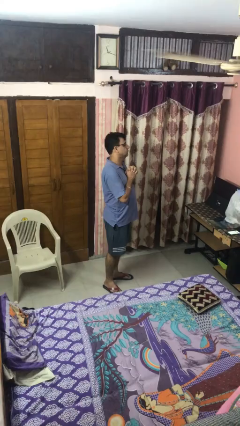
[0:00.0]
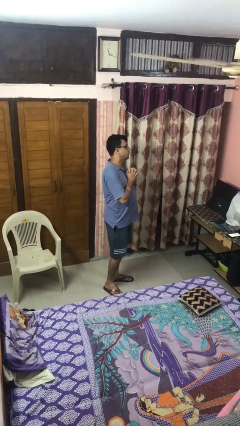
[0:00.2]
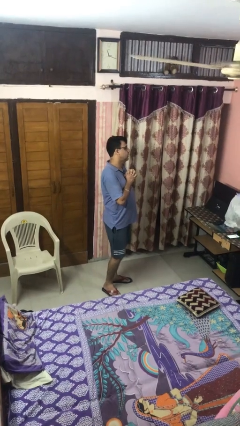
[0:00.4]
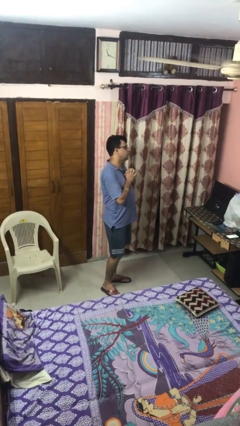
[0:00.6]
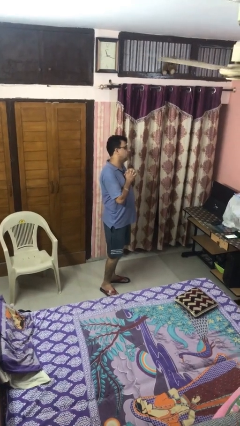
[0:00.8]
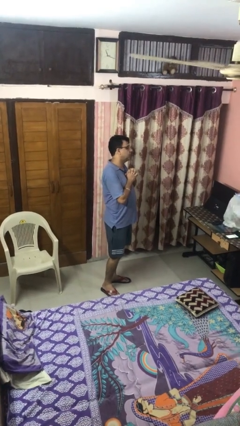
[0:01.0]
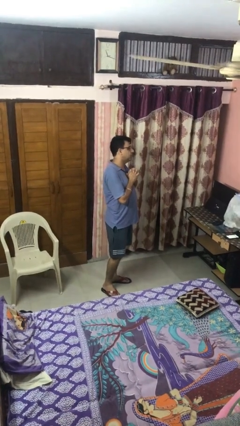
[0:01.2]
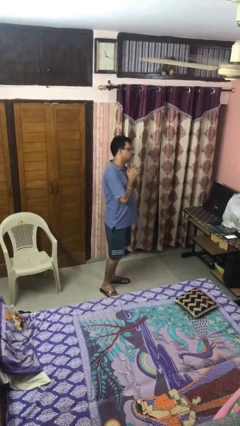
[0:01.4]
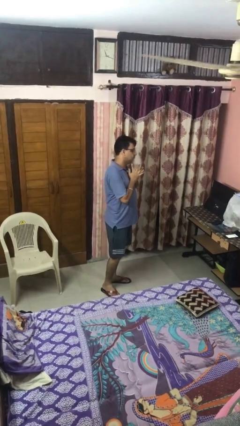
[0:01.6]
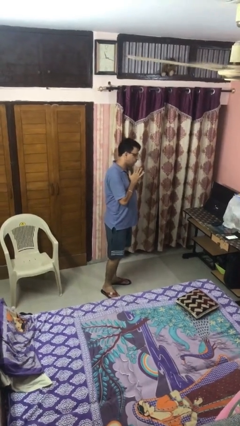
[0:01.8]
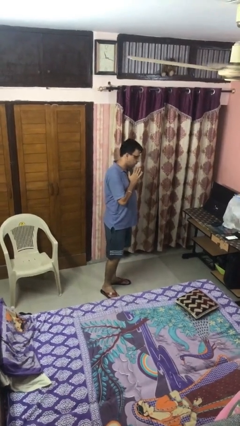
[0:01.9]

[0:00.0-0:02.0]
person prays

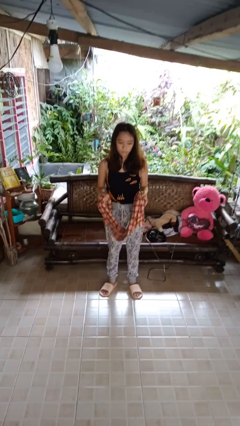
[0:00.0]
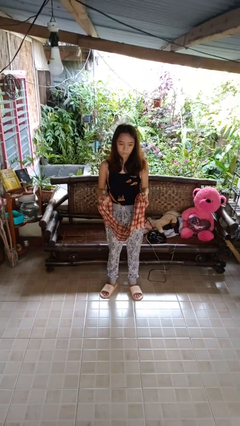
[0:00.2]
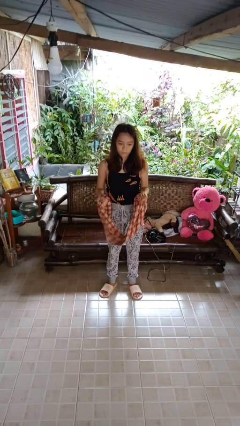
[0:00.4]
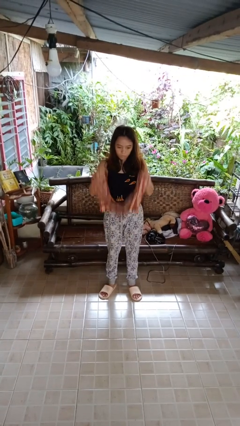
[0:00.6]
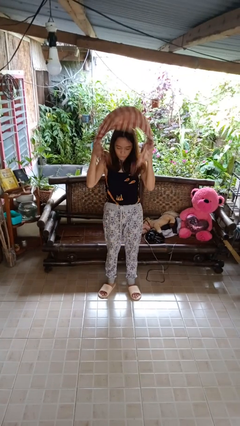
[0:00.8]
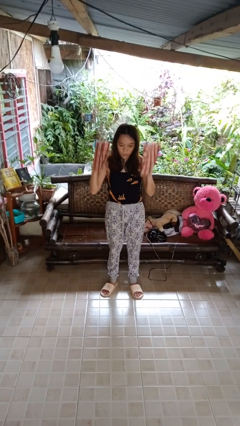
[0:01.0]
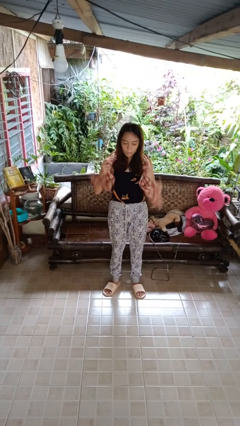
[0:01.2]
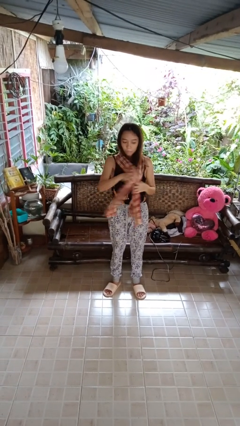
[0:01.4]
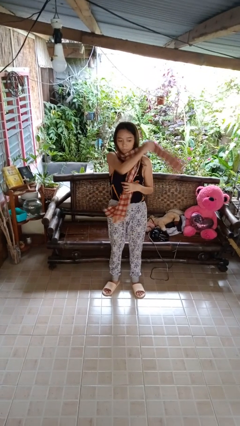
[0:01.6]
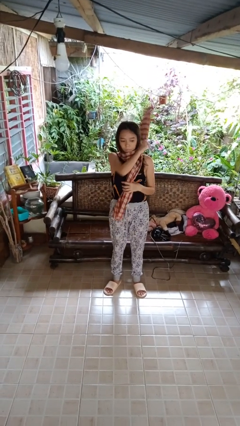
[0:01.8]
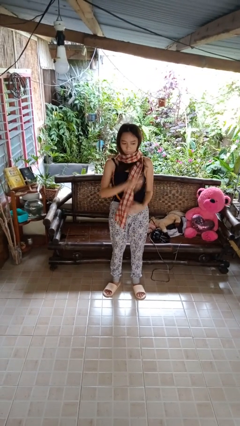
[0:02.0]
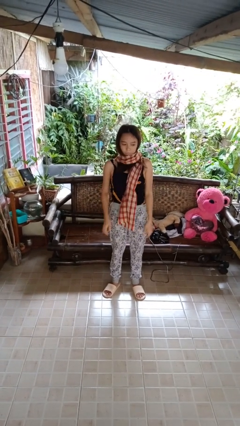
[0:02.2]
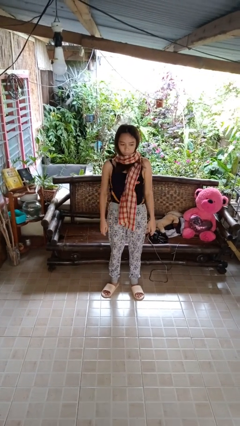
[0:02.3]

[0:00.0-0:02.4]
person puts on scarf

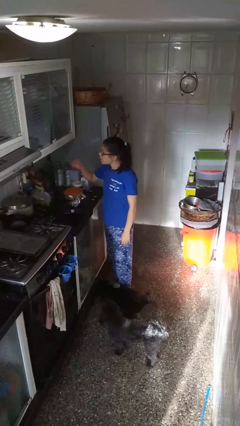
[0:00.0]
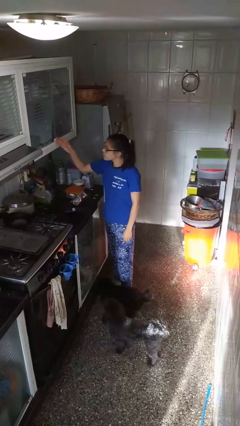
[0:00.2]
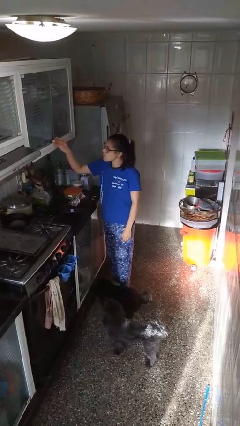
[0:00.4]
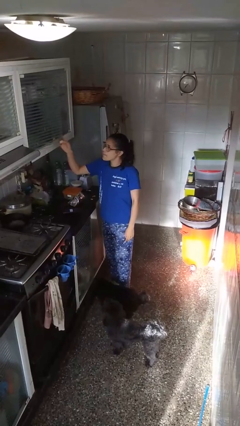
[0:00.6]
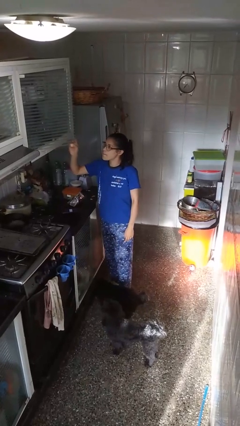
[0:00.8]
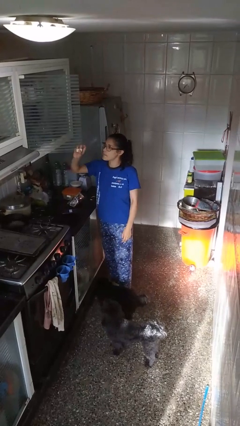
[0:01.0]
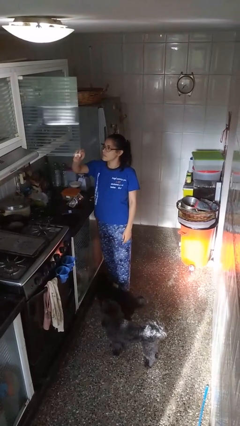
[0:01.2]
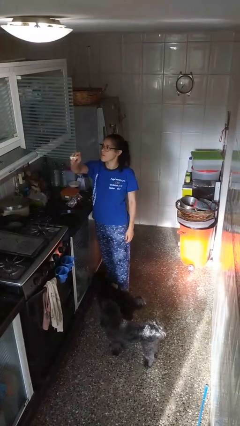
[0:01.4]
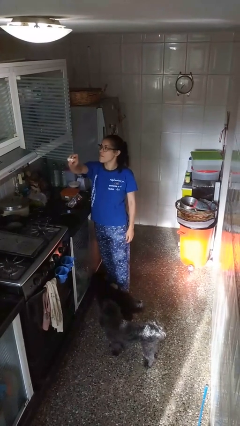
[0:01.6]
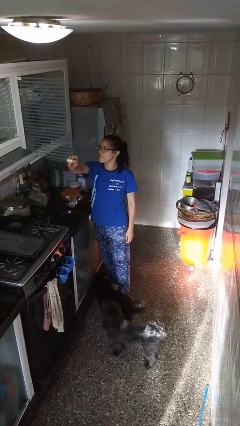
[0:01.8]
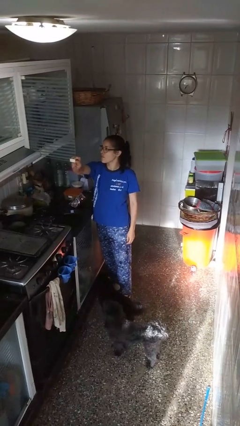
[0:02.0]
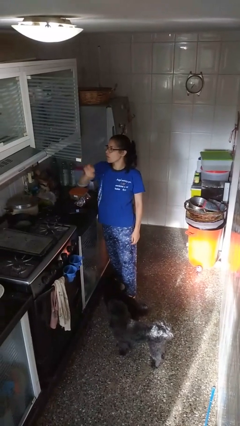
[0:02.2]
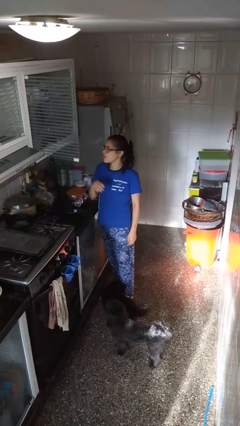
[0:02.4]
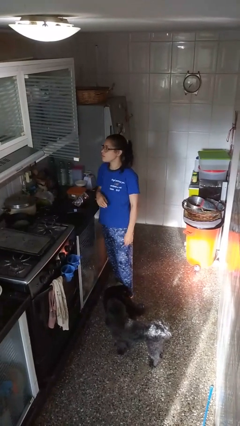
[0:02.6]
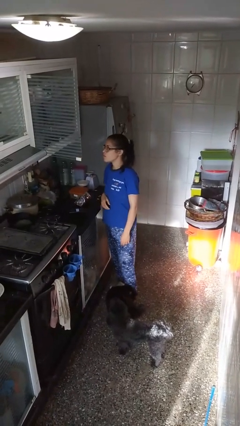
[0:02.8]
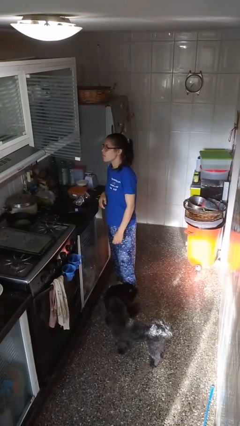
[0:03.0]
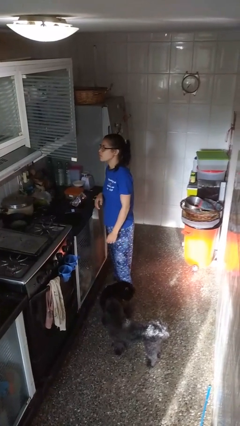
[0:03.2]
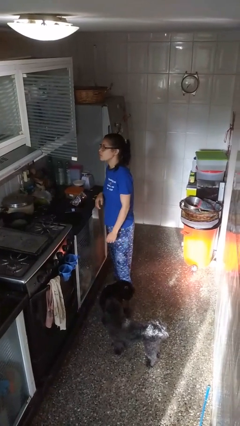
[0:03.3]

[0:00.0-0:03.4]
person closes cabinet

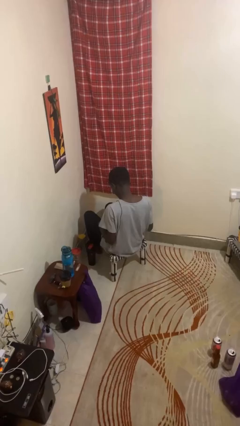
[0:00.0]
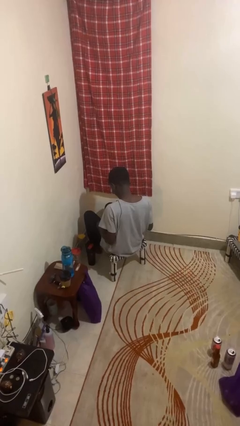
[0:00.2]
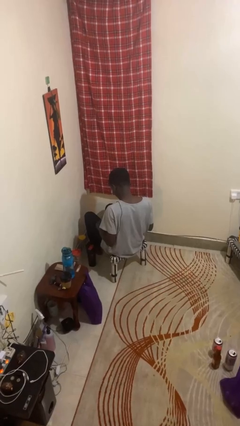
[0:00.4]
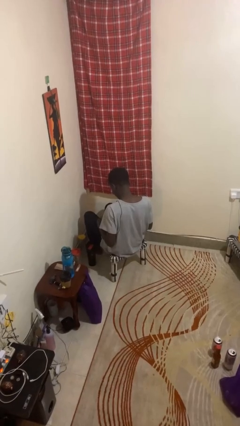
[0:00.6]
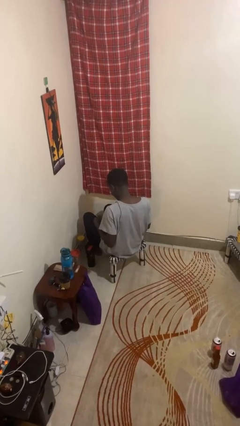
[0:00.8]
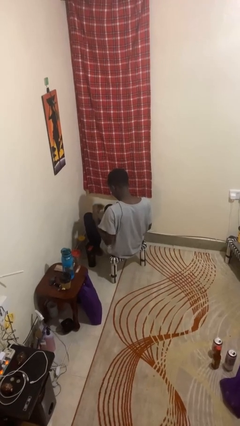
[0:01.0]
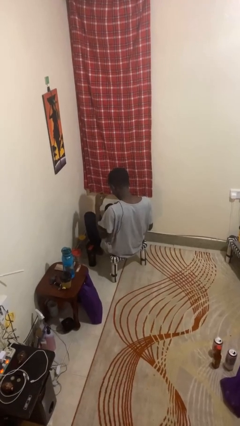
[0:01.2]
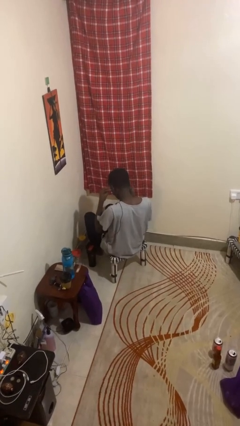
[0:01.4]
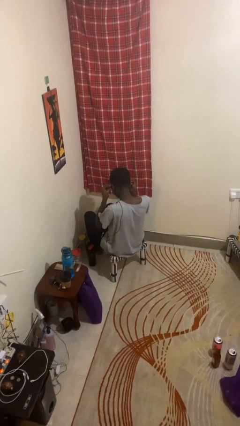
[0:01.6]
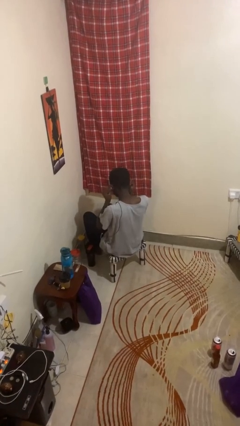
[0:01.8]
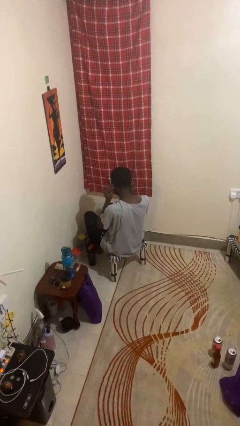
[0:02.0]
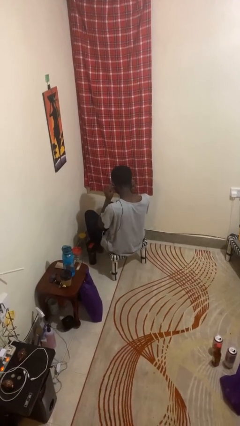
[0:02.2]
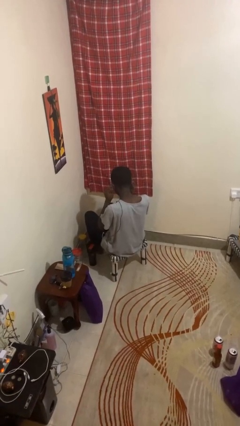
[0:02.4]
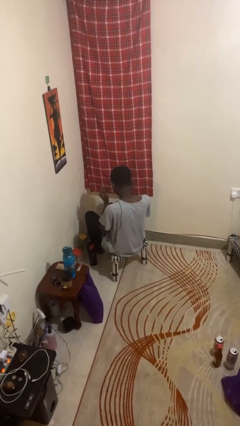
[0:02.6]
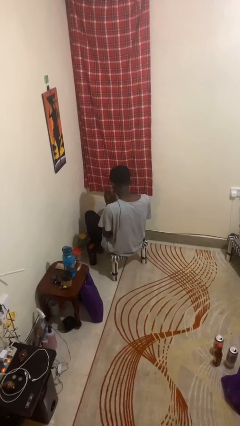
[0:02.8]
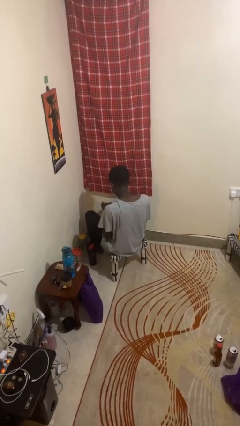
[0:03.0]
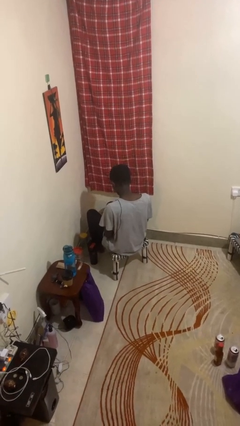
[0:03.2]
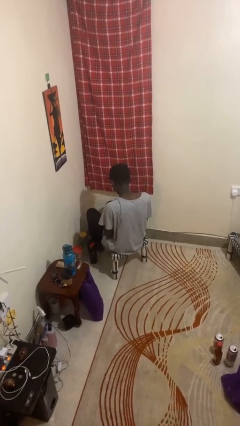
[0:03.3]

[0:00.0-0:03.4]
person puts on headphones

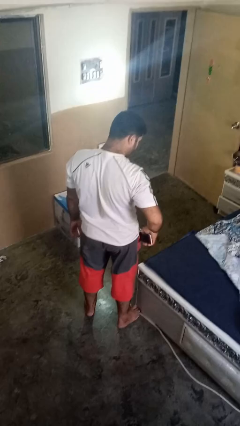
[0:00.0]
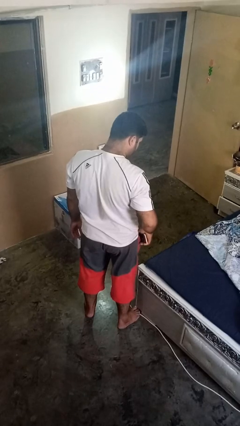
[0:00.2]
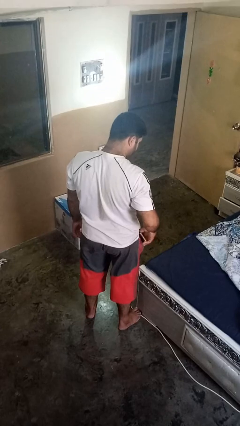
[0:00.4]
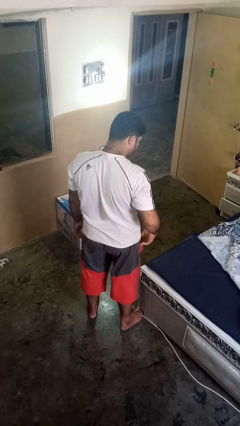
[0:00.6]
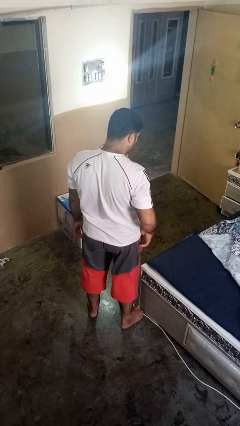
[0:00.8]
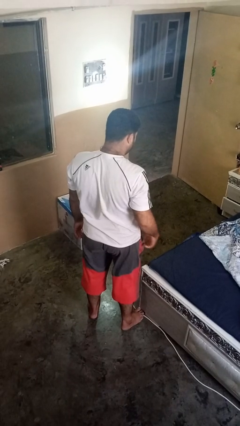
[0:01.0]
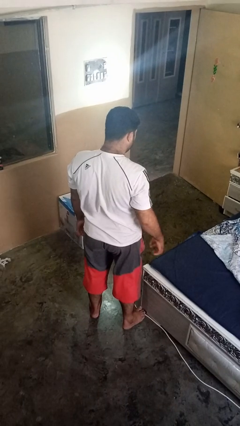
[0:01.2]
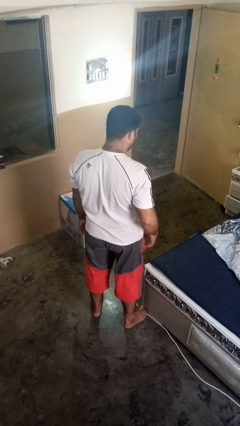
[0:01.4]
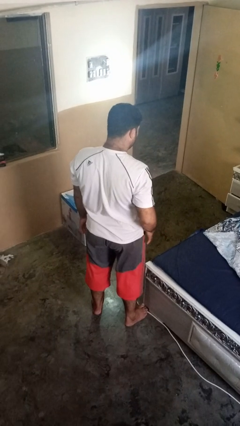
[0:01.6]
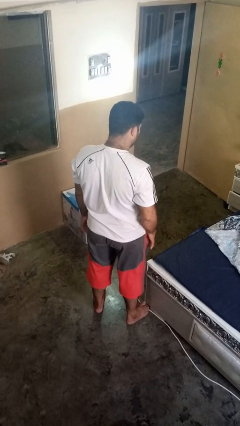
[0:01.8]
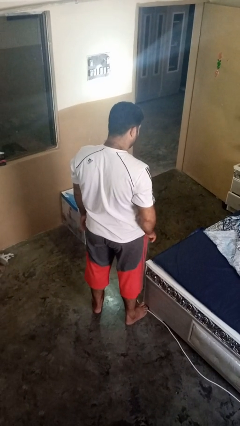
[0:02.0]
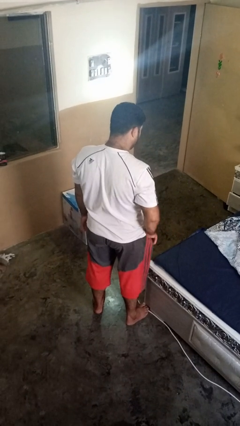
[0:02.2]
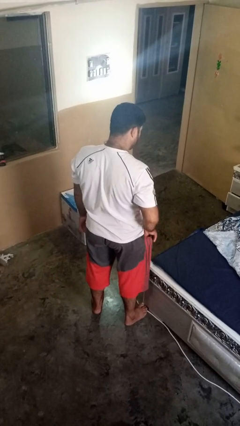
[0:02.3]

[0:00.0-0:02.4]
person puts phone into pocket

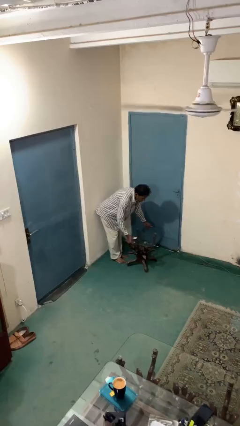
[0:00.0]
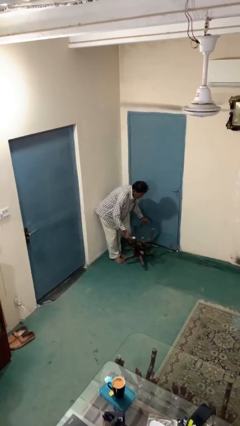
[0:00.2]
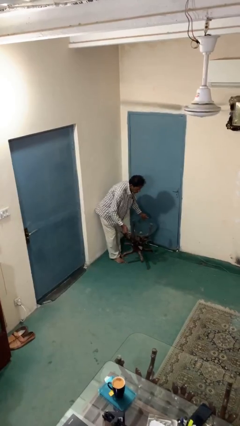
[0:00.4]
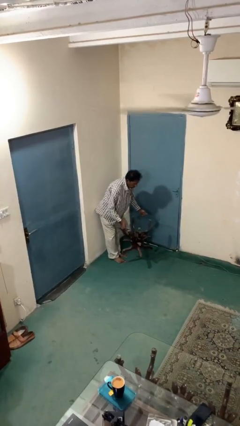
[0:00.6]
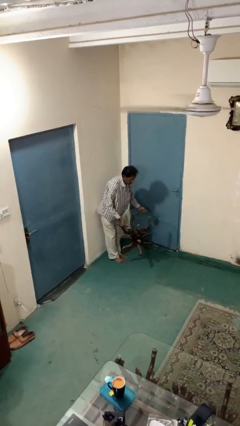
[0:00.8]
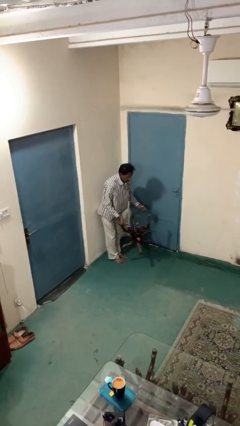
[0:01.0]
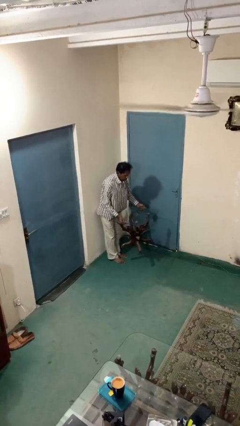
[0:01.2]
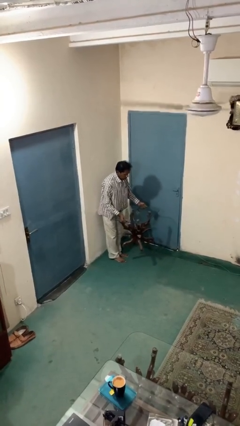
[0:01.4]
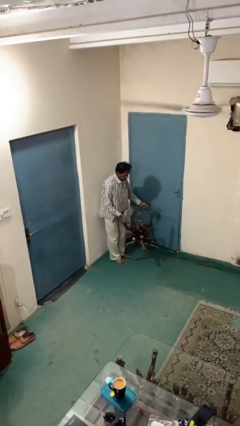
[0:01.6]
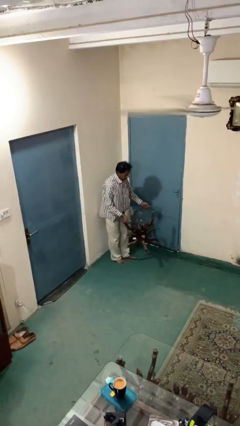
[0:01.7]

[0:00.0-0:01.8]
person picks up object from floor

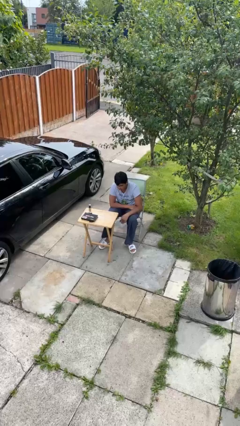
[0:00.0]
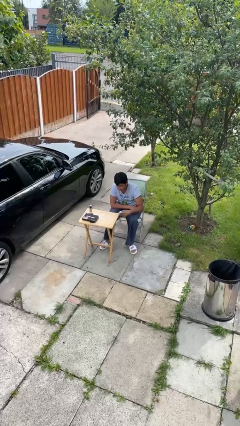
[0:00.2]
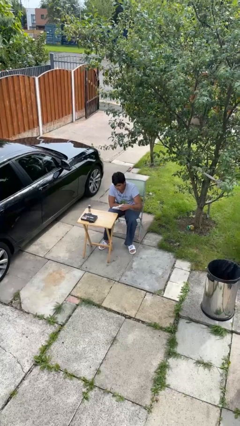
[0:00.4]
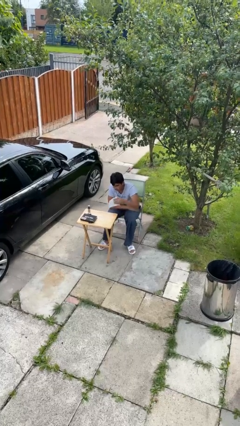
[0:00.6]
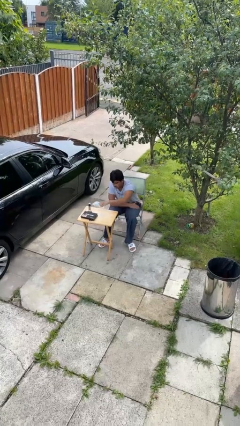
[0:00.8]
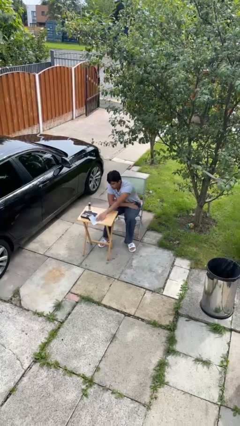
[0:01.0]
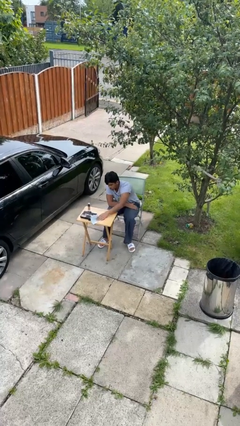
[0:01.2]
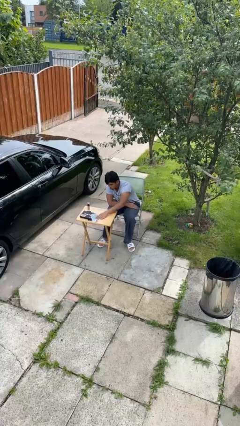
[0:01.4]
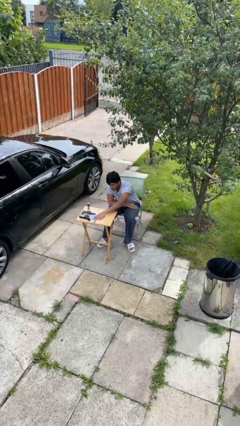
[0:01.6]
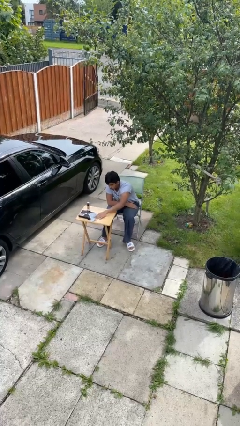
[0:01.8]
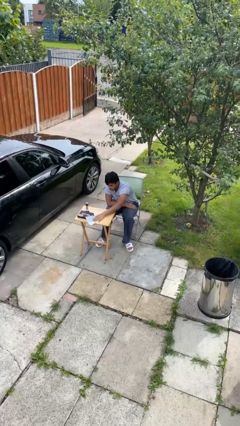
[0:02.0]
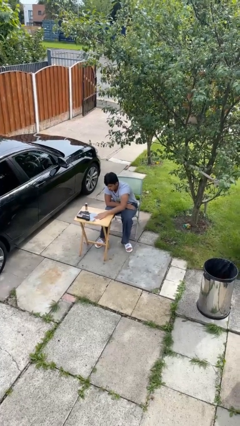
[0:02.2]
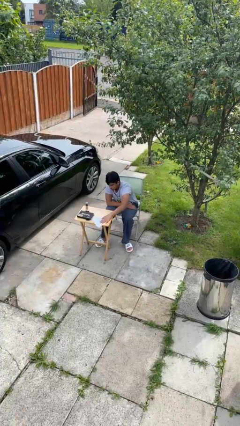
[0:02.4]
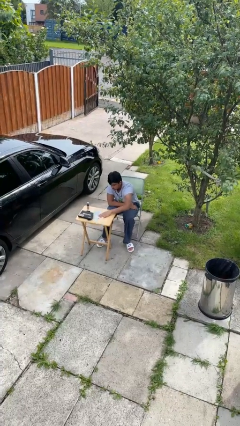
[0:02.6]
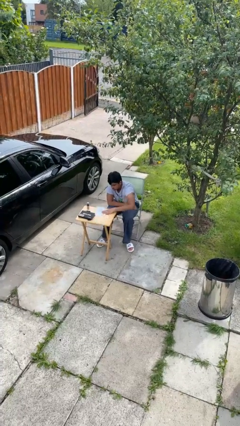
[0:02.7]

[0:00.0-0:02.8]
person cleans table with rag
